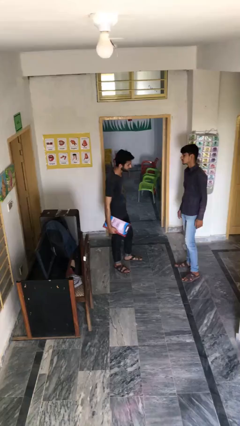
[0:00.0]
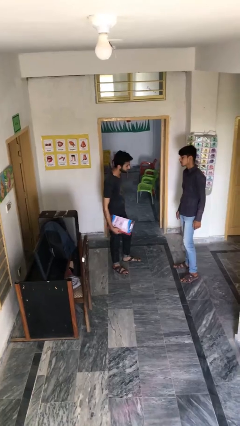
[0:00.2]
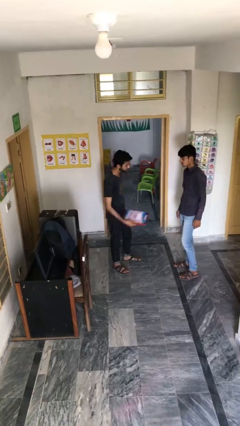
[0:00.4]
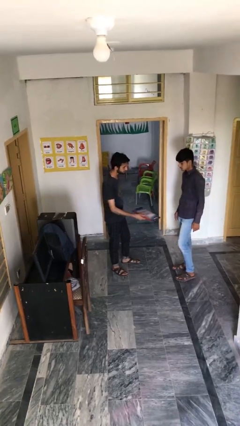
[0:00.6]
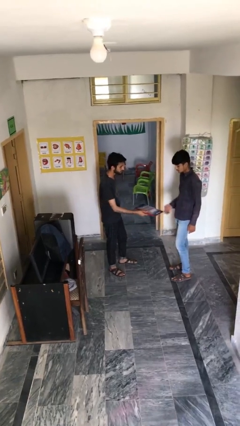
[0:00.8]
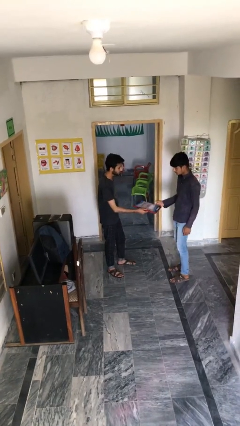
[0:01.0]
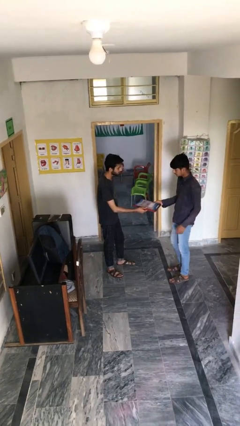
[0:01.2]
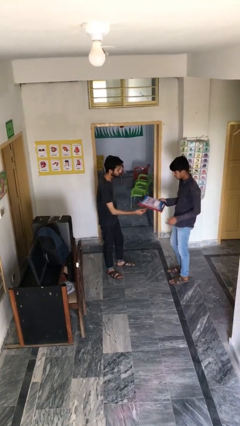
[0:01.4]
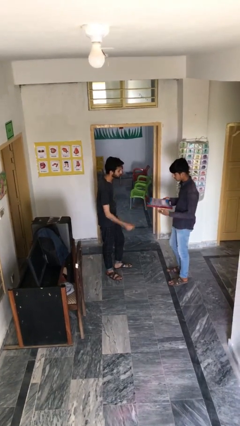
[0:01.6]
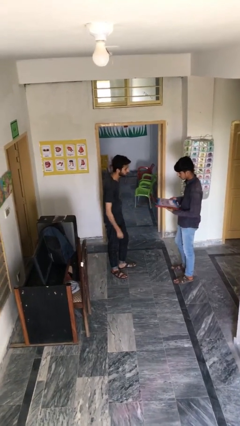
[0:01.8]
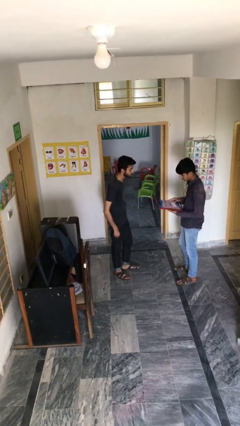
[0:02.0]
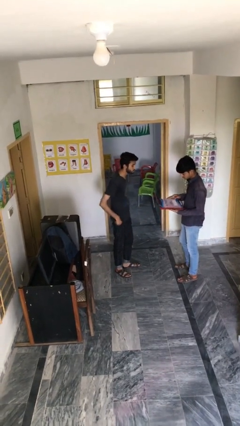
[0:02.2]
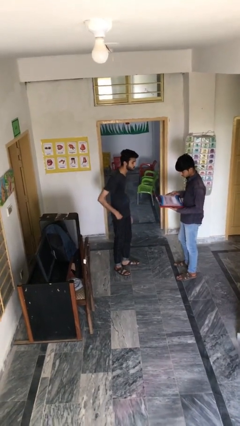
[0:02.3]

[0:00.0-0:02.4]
person transfers object to person

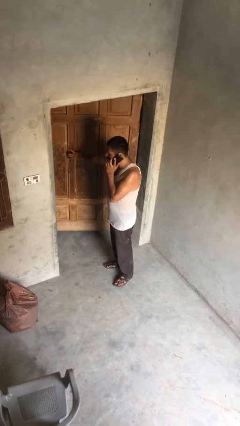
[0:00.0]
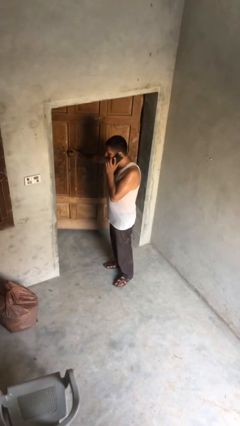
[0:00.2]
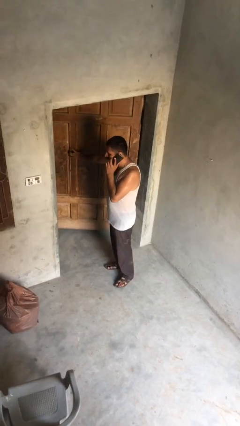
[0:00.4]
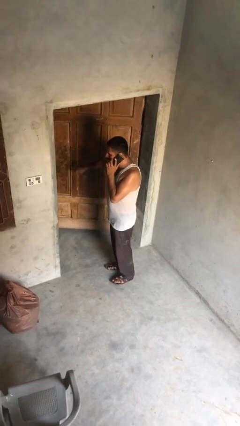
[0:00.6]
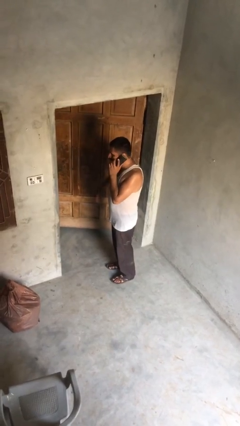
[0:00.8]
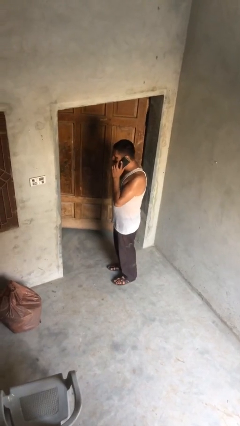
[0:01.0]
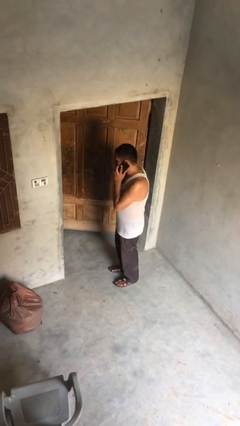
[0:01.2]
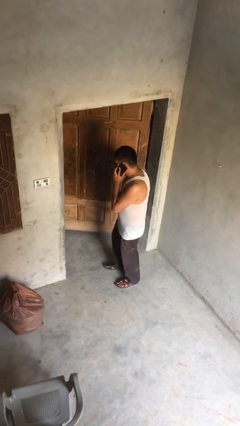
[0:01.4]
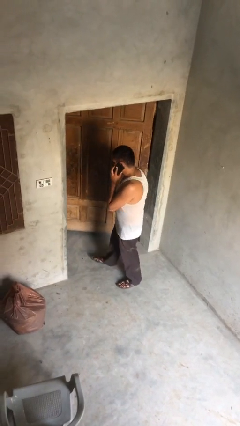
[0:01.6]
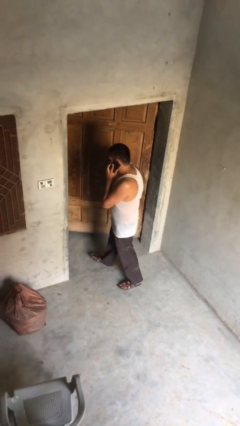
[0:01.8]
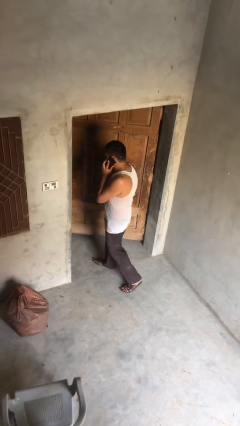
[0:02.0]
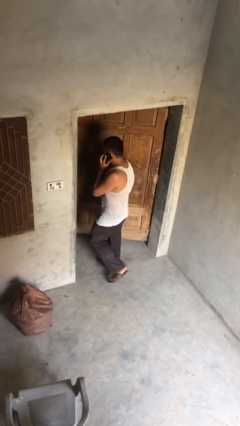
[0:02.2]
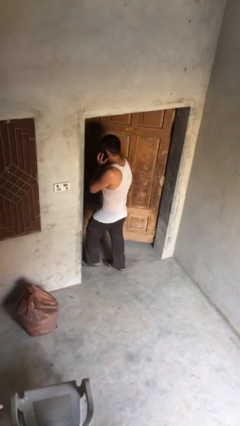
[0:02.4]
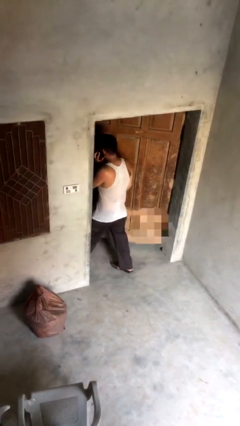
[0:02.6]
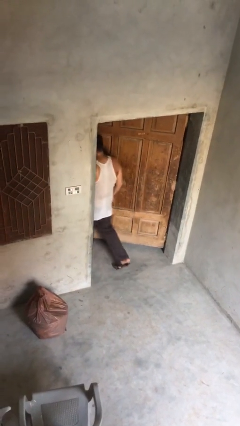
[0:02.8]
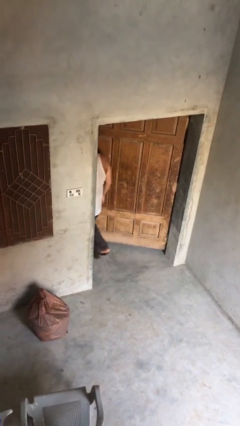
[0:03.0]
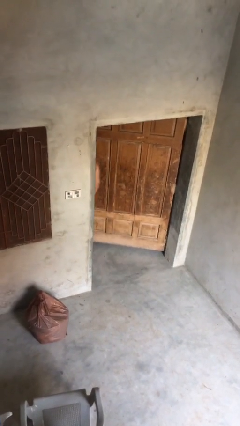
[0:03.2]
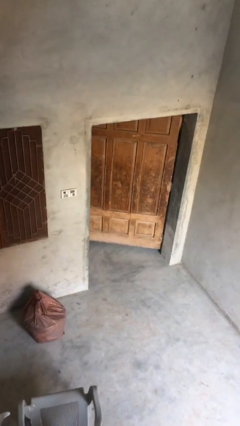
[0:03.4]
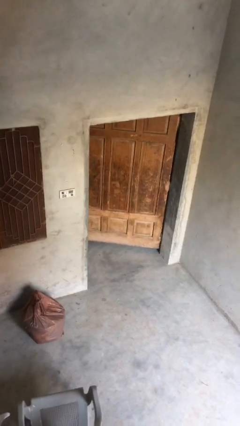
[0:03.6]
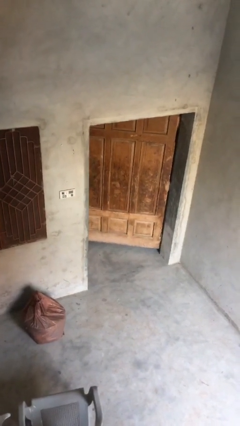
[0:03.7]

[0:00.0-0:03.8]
person exits scene through structure

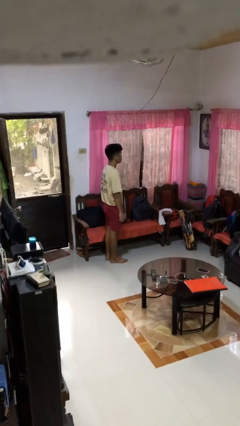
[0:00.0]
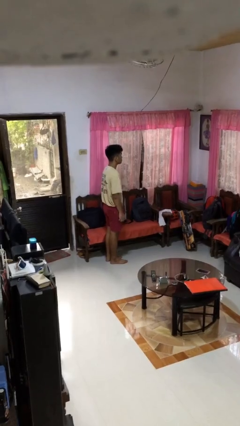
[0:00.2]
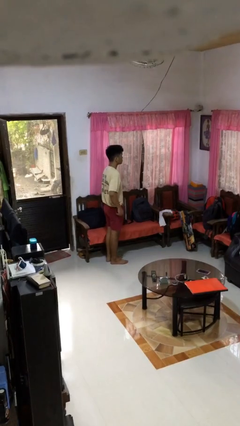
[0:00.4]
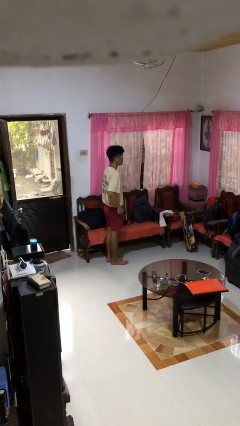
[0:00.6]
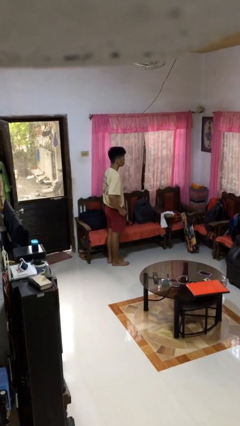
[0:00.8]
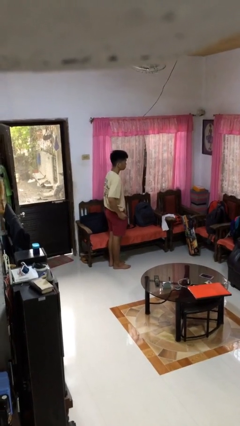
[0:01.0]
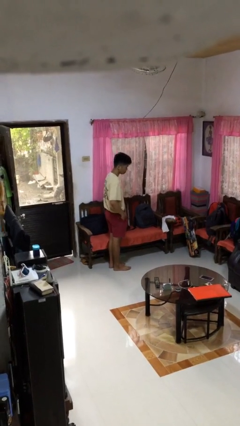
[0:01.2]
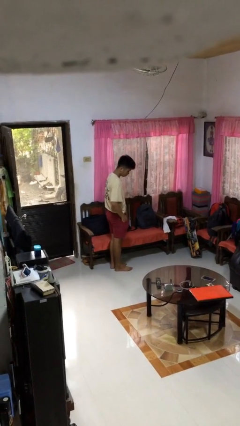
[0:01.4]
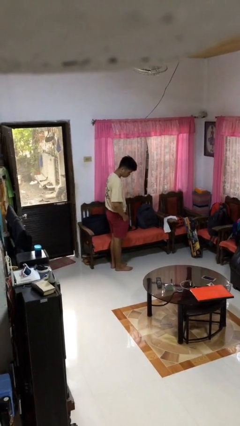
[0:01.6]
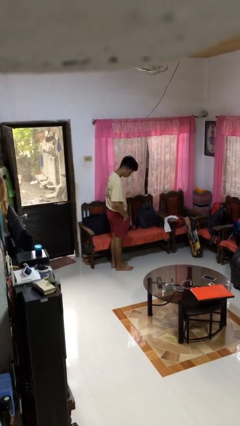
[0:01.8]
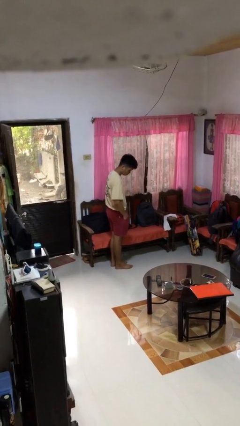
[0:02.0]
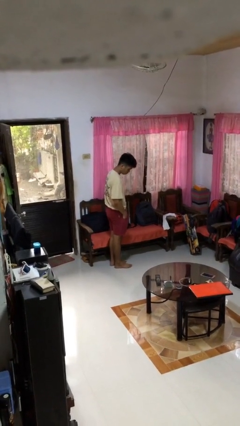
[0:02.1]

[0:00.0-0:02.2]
person puts hands in back pockets

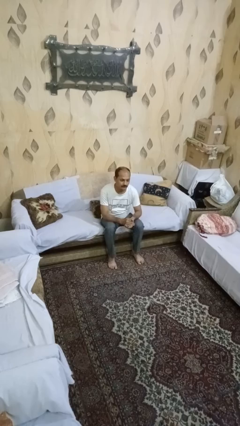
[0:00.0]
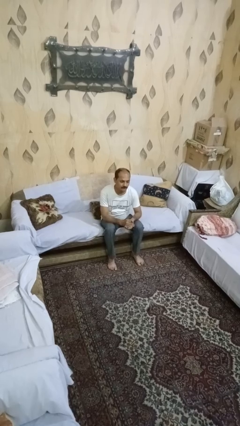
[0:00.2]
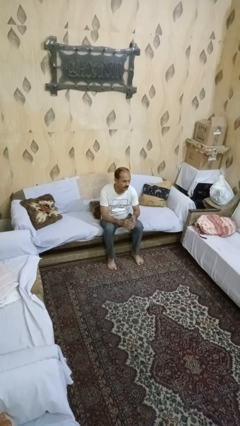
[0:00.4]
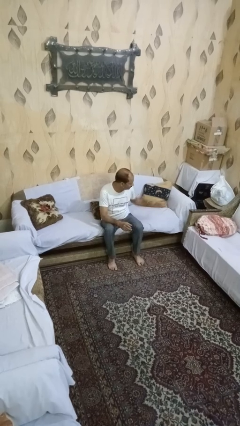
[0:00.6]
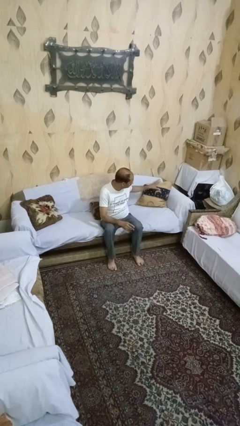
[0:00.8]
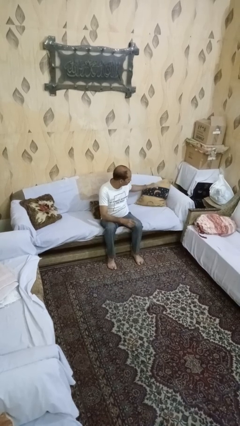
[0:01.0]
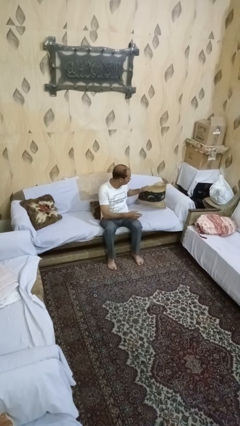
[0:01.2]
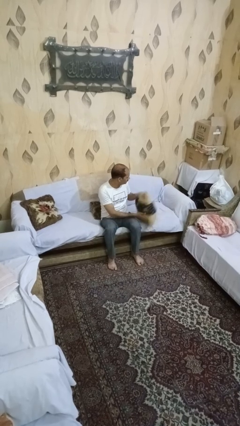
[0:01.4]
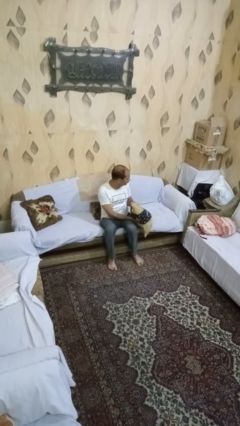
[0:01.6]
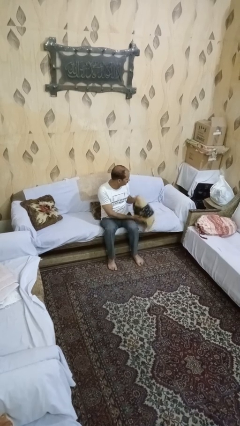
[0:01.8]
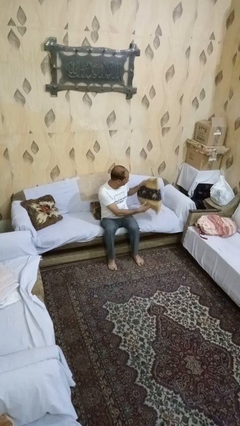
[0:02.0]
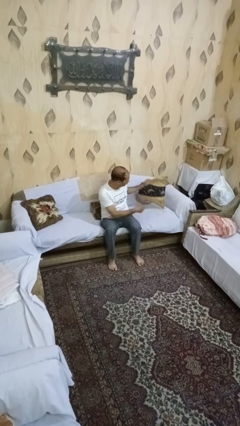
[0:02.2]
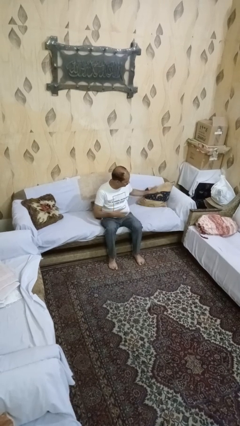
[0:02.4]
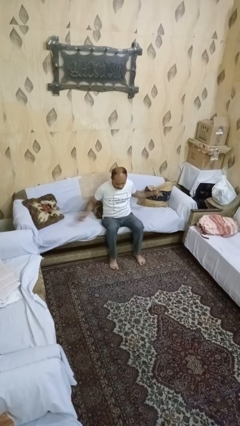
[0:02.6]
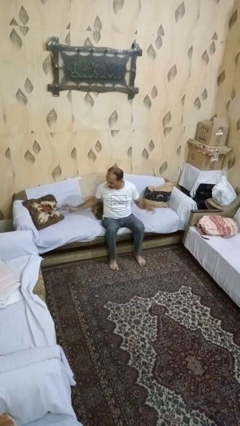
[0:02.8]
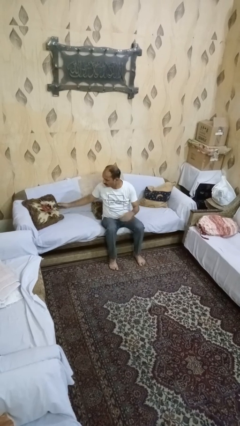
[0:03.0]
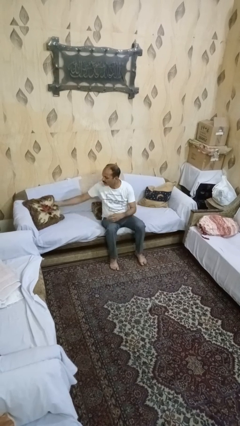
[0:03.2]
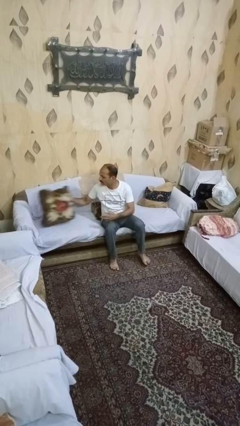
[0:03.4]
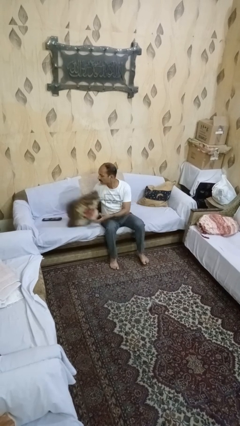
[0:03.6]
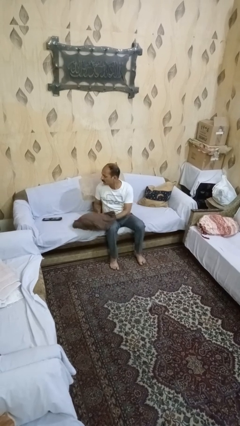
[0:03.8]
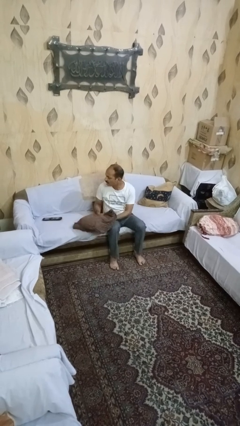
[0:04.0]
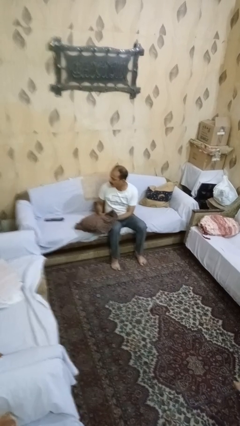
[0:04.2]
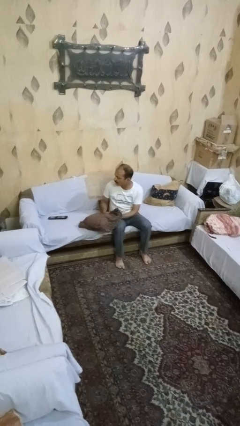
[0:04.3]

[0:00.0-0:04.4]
person searches in couch

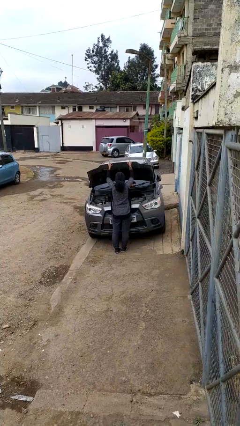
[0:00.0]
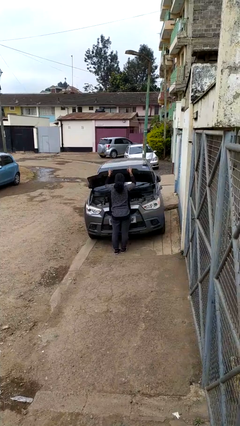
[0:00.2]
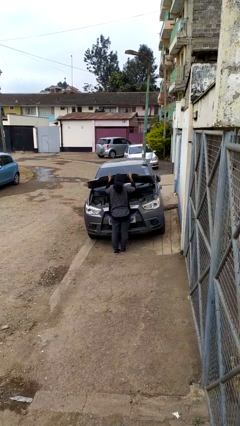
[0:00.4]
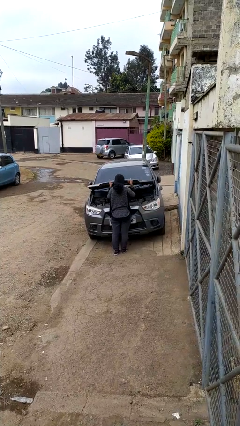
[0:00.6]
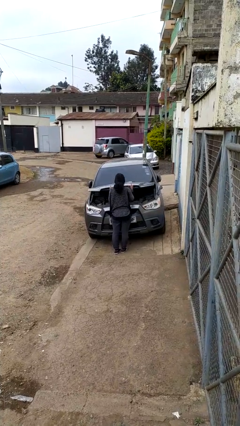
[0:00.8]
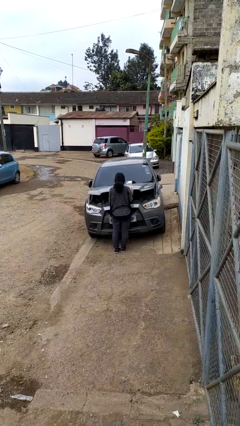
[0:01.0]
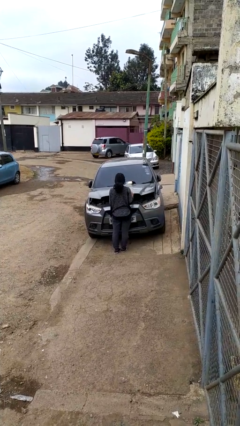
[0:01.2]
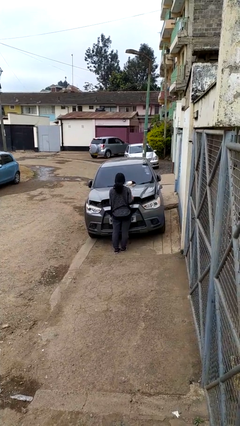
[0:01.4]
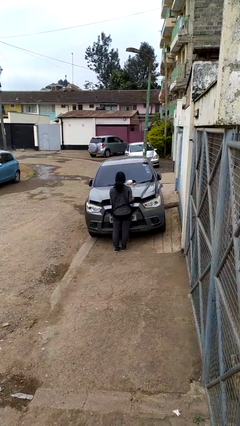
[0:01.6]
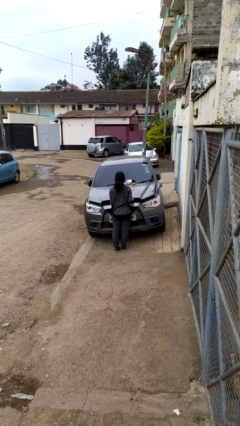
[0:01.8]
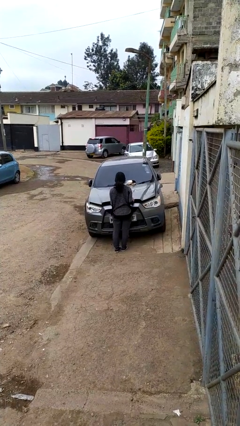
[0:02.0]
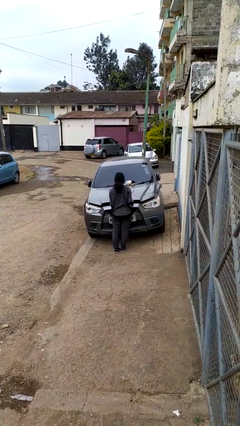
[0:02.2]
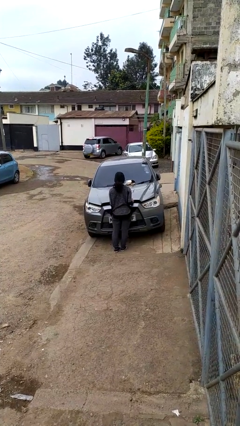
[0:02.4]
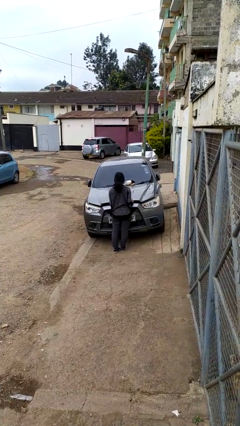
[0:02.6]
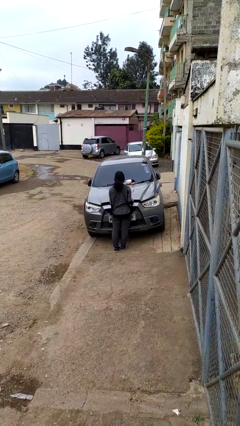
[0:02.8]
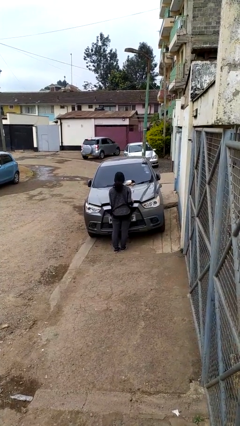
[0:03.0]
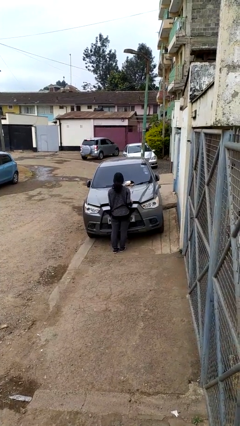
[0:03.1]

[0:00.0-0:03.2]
person closes car hood

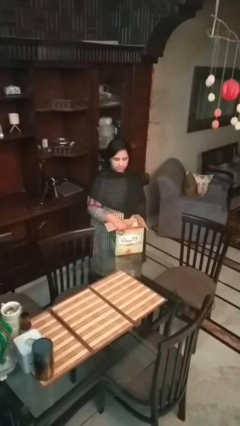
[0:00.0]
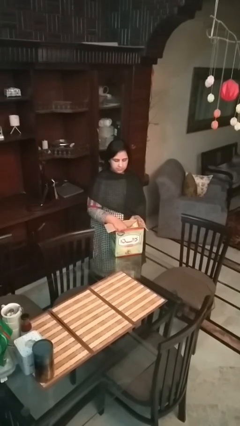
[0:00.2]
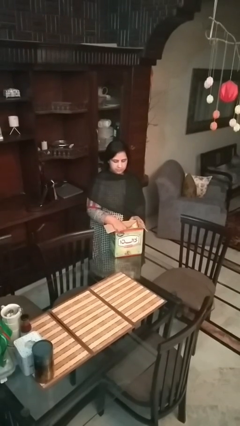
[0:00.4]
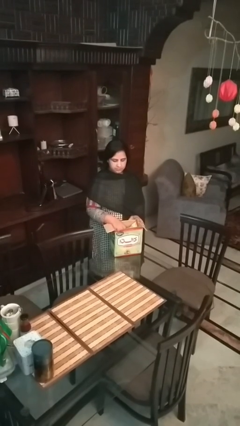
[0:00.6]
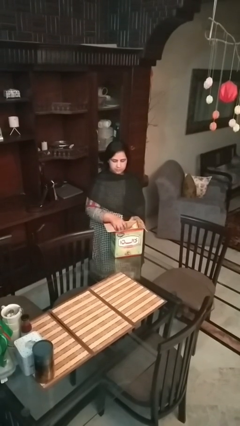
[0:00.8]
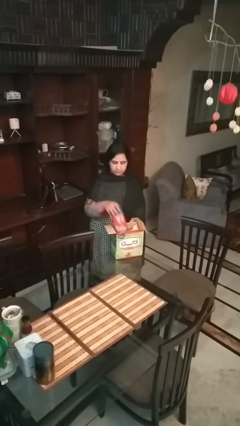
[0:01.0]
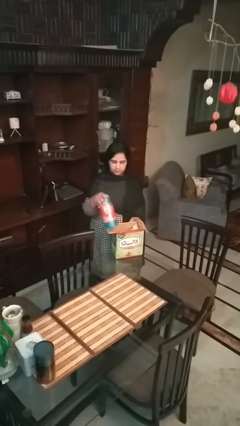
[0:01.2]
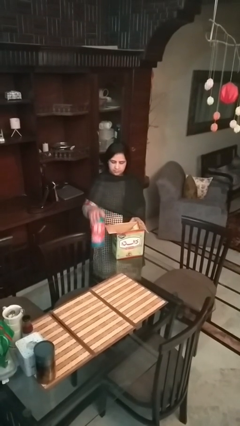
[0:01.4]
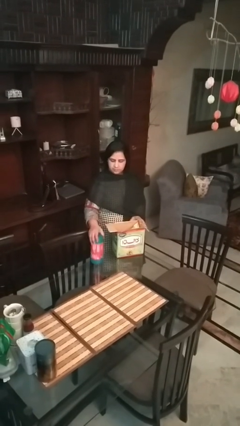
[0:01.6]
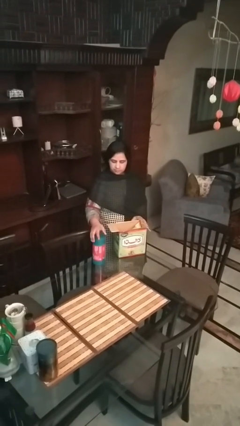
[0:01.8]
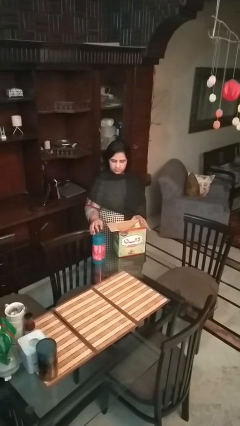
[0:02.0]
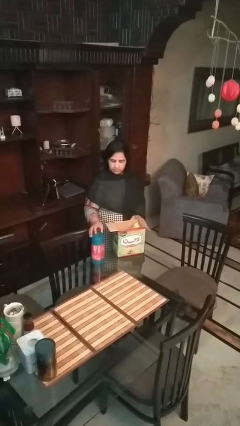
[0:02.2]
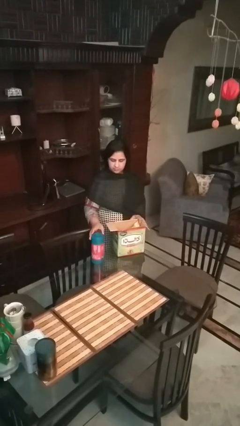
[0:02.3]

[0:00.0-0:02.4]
person takes object from box
